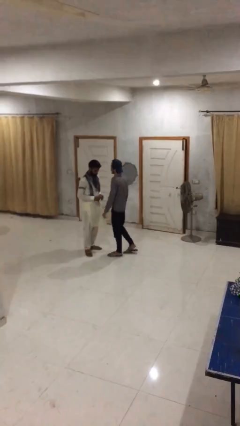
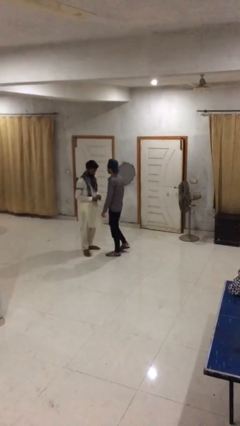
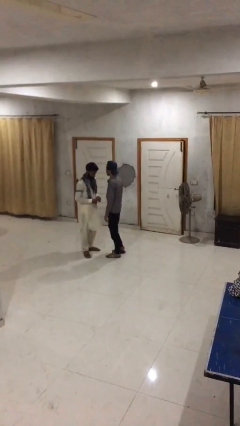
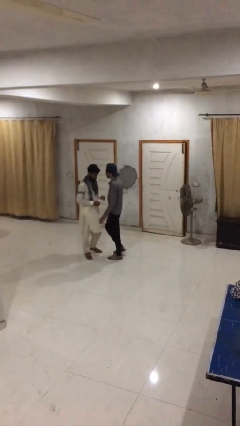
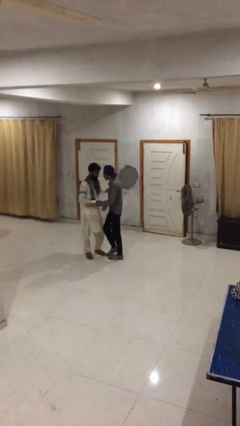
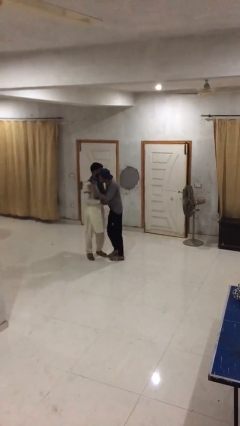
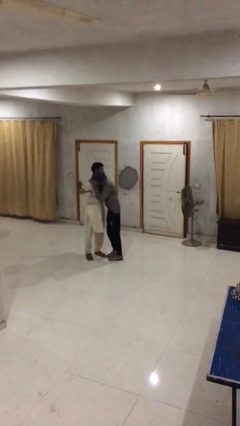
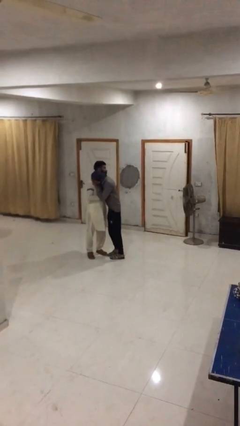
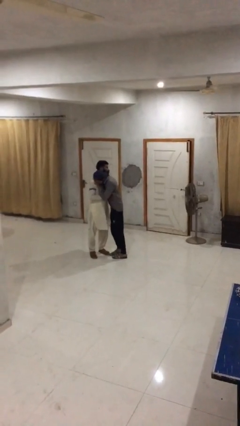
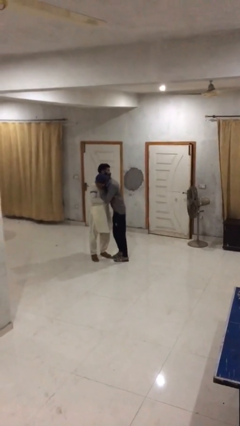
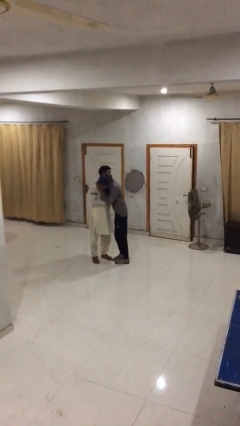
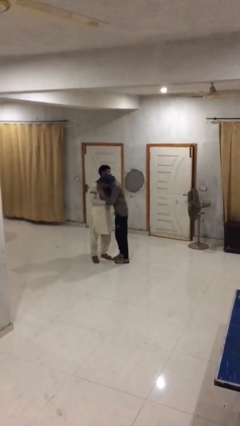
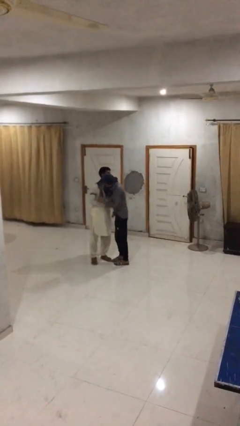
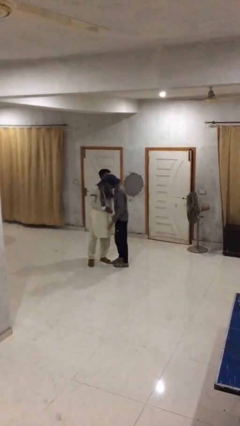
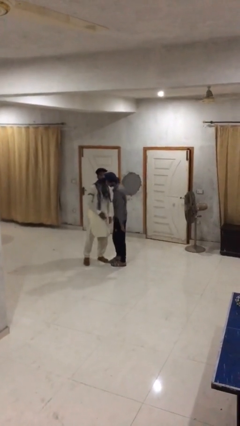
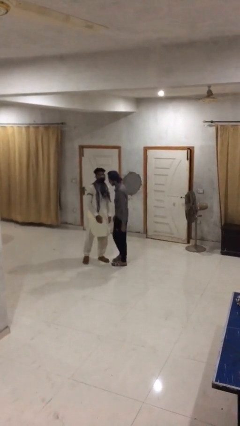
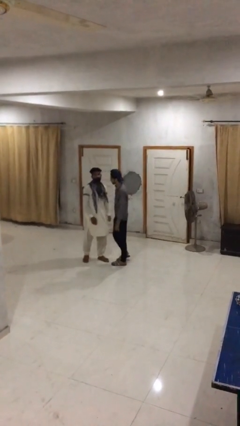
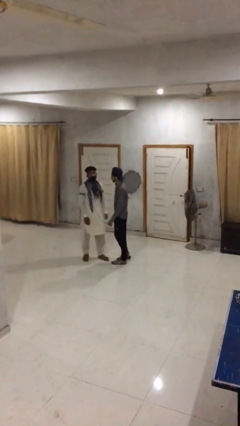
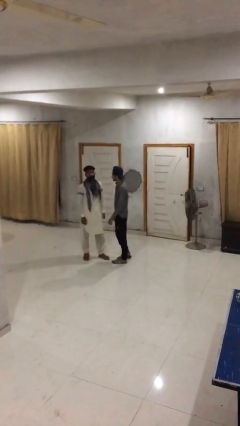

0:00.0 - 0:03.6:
person embraces person

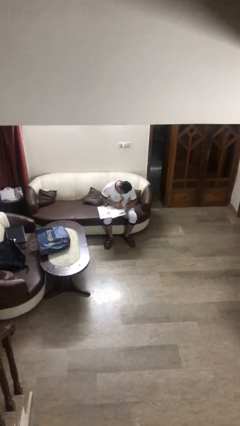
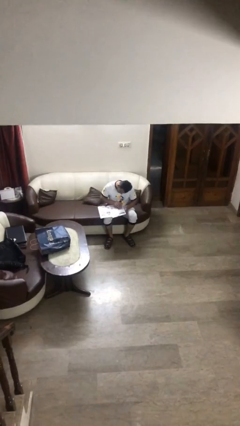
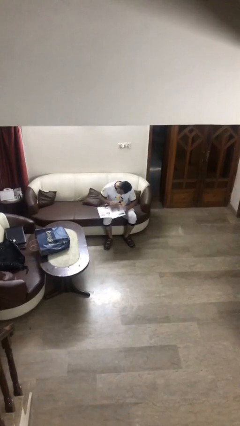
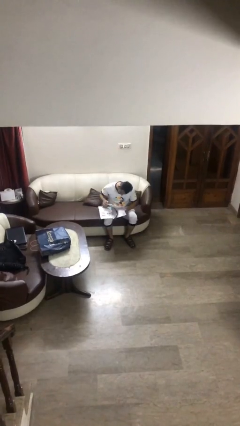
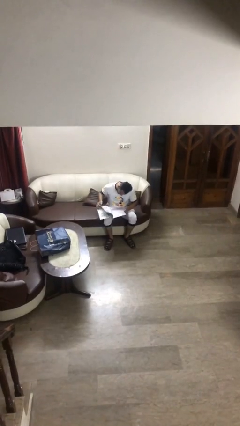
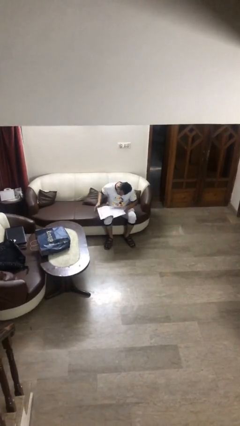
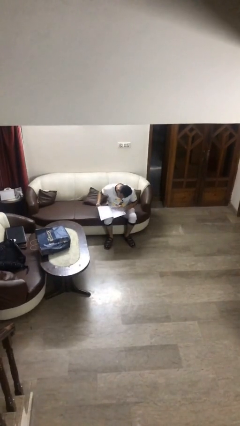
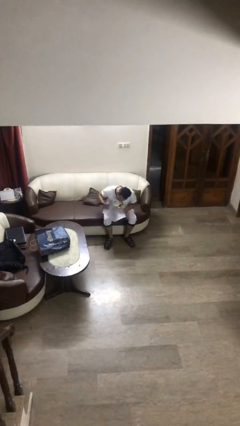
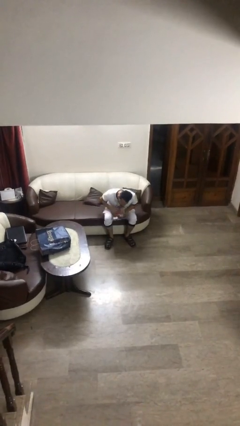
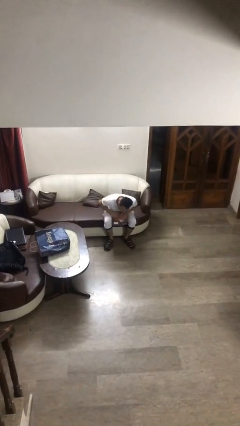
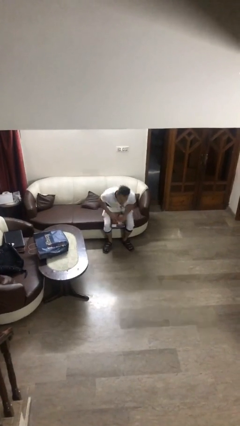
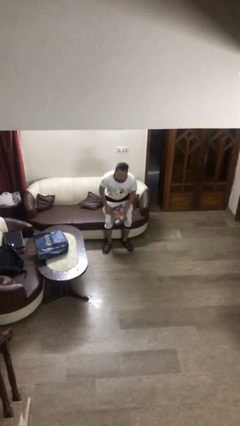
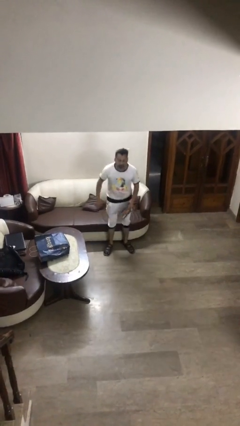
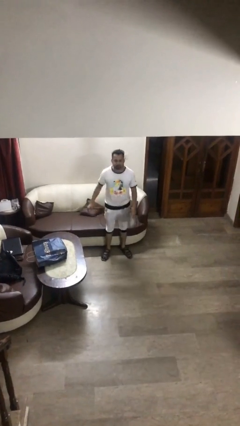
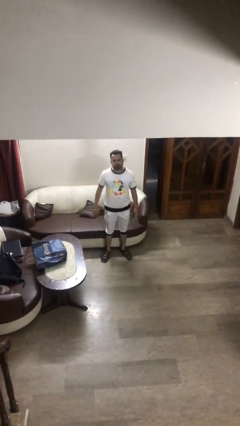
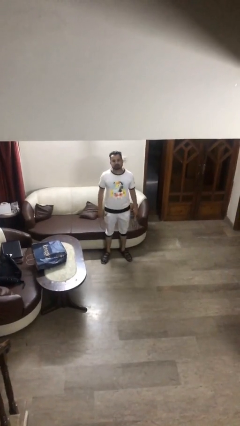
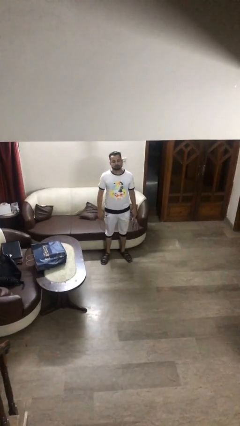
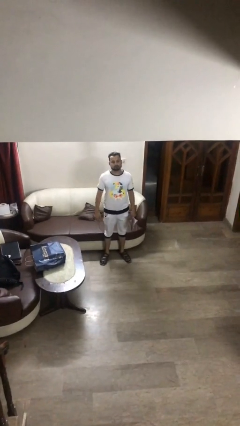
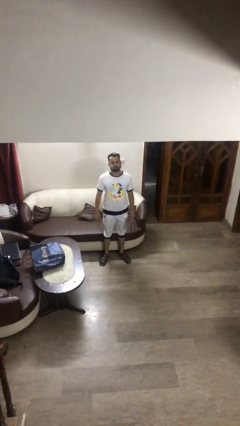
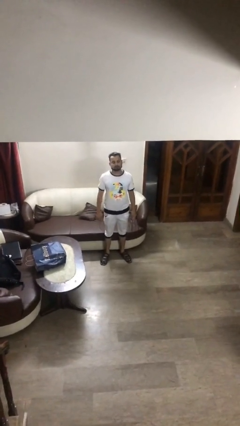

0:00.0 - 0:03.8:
person stands up

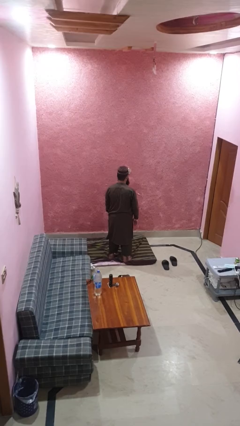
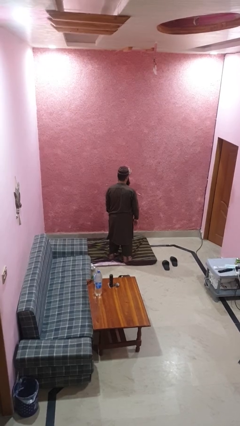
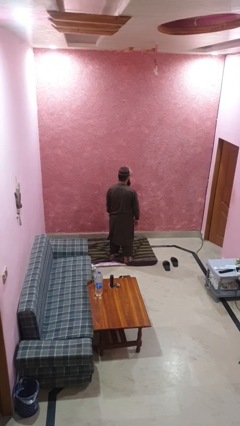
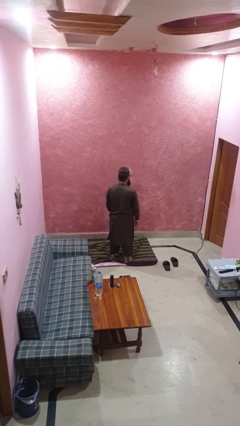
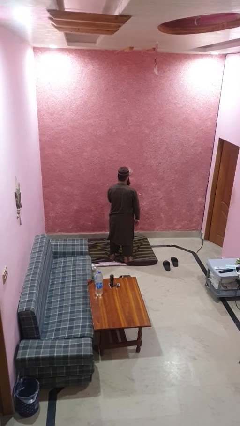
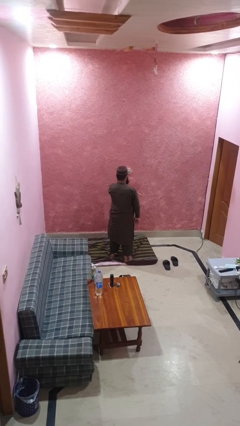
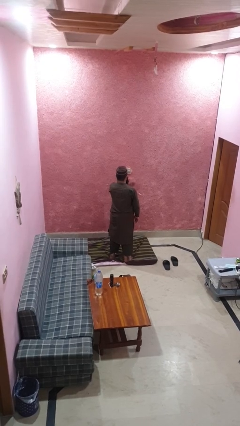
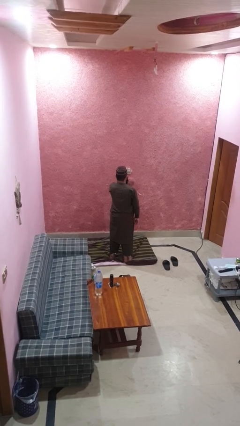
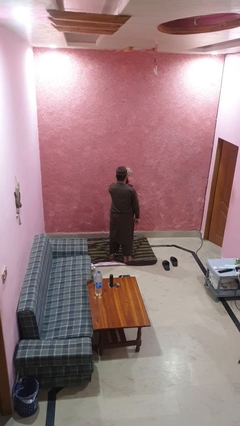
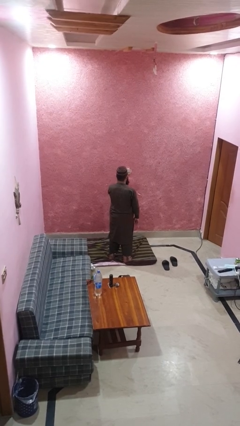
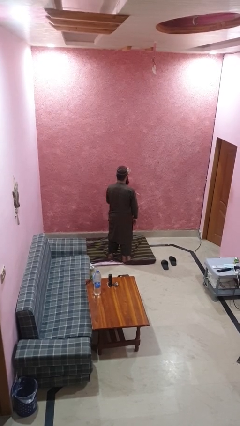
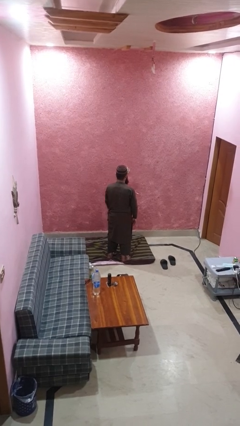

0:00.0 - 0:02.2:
person drums on chest

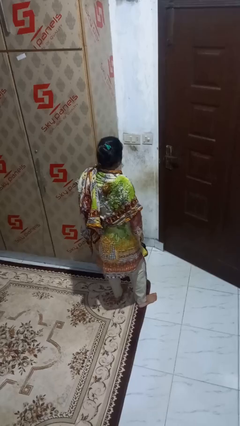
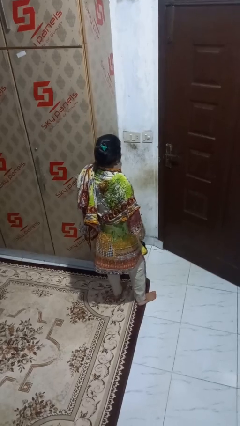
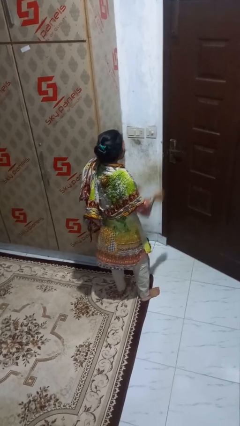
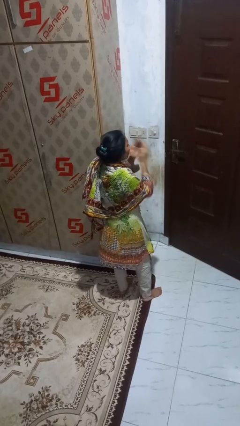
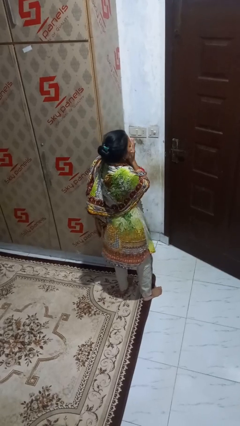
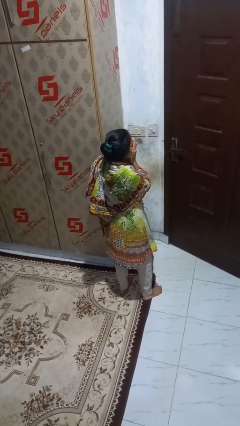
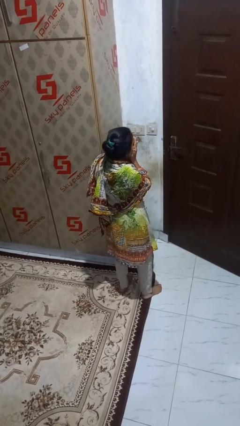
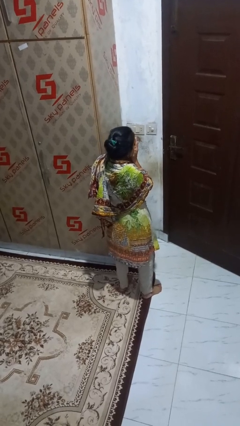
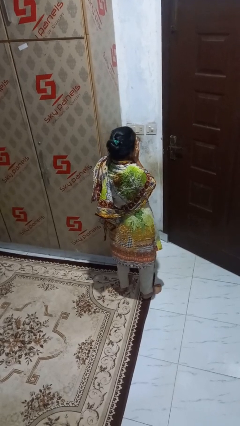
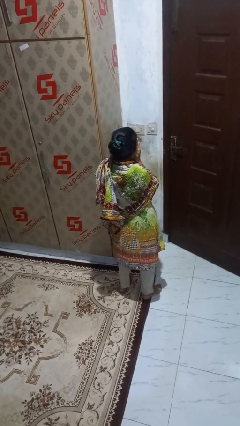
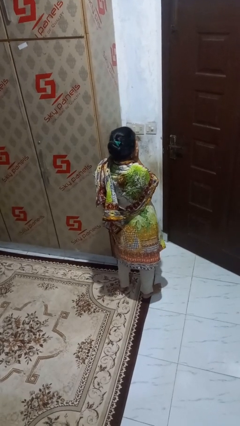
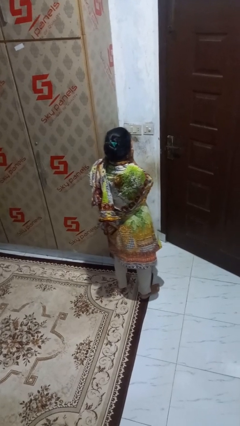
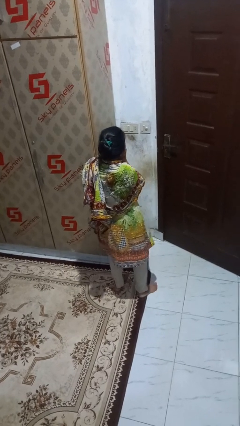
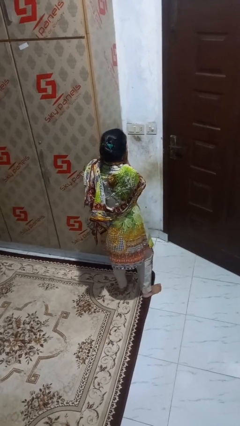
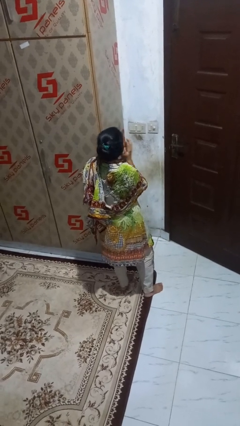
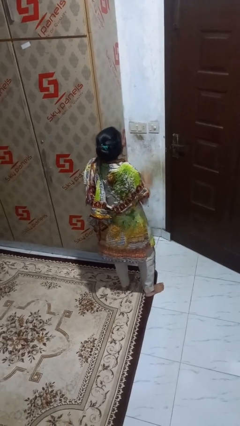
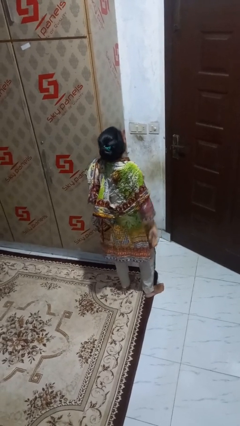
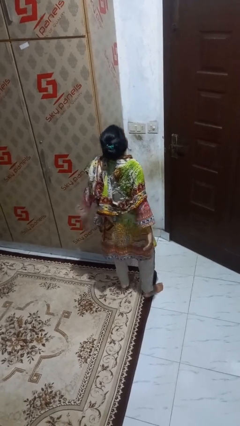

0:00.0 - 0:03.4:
person sneezes into hand

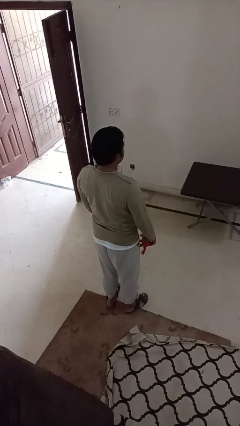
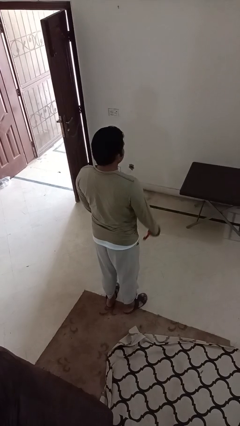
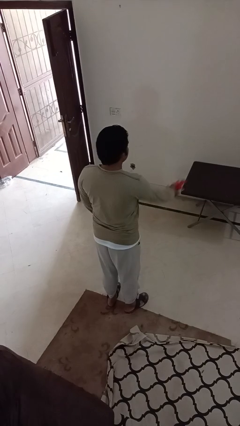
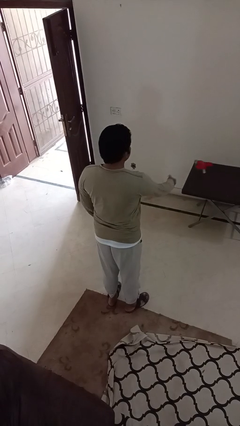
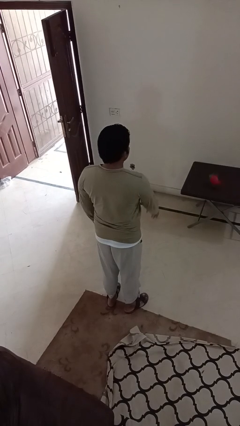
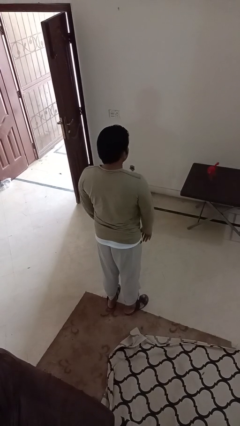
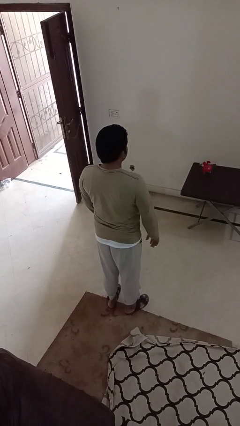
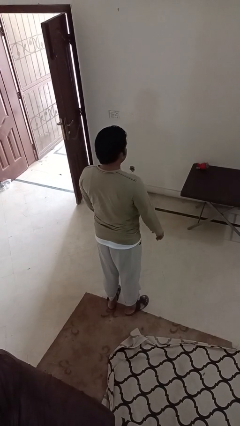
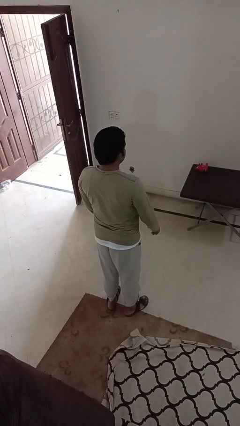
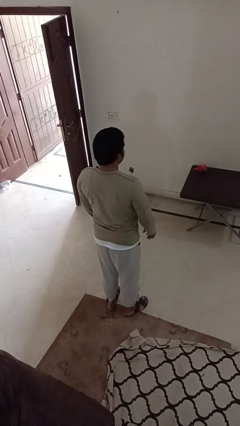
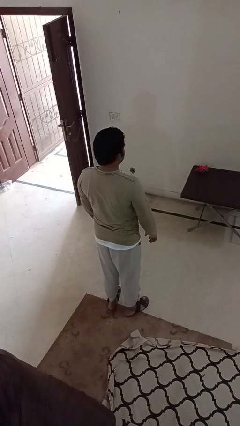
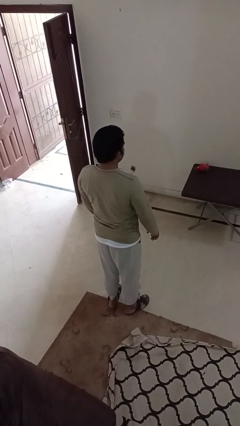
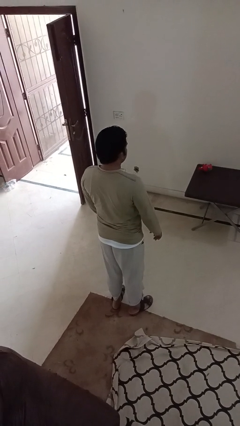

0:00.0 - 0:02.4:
person throws object on table

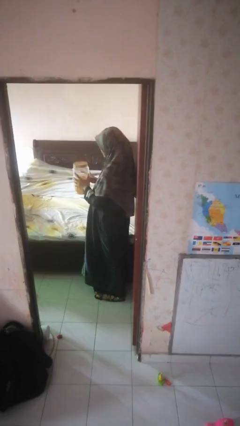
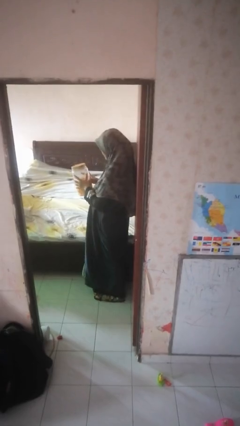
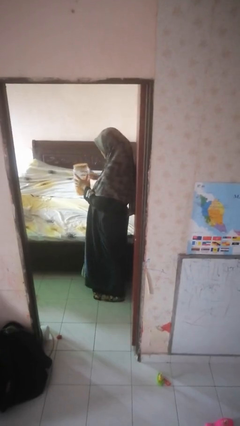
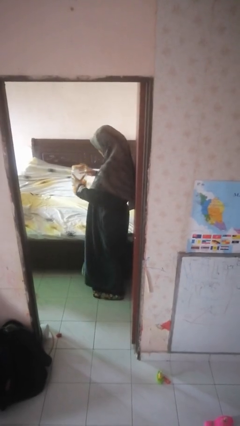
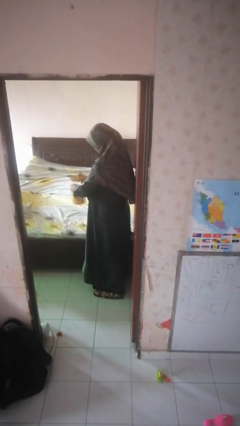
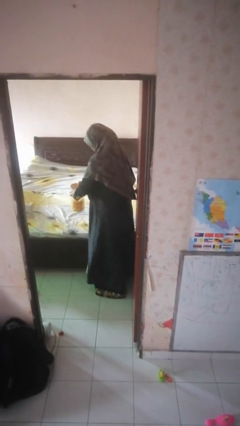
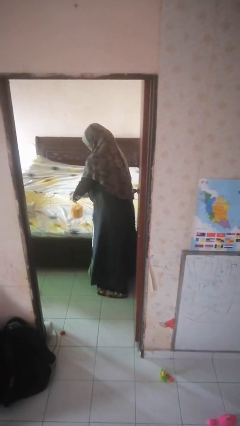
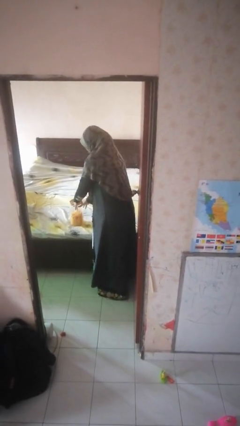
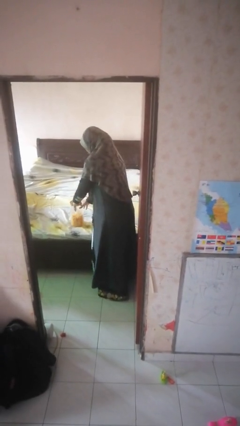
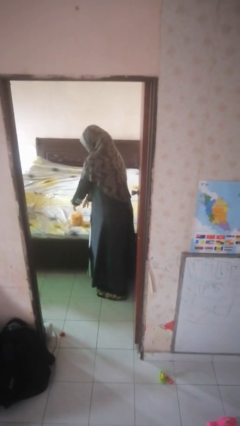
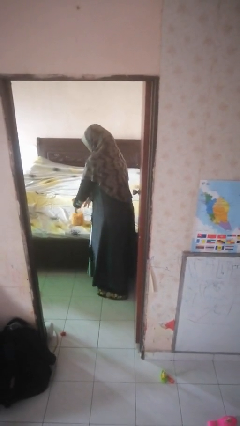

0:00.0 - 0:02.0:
person puts down object on bed
